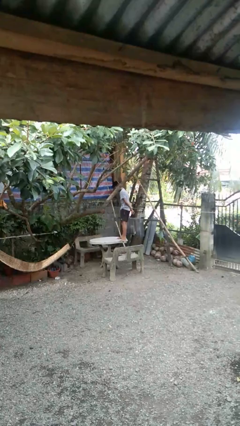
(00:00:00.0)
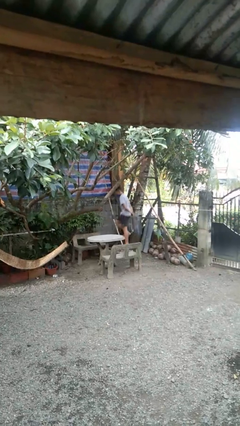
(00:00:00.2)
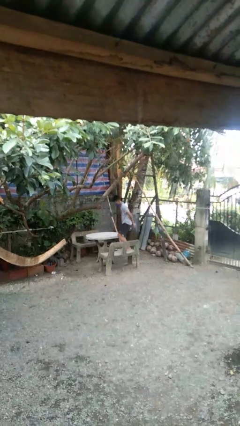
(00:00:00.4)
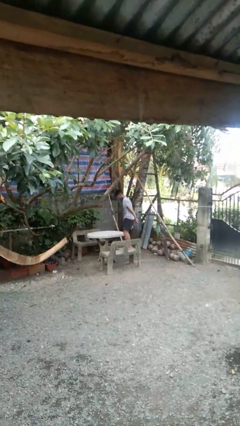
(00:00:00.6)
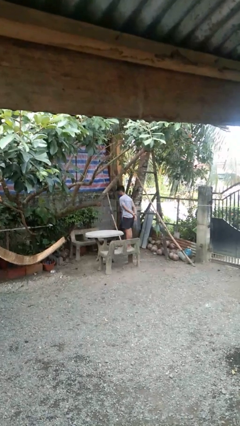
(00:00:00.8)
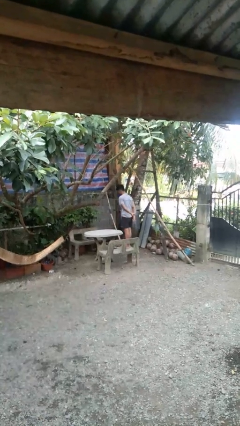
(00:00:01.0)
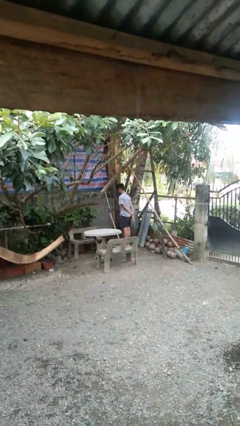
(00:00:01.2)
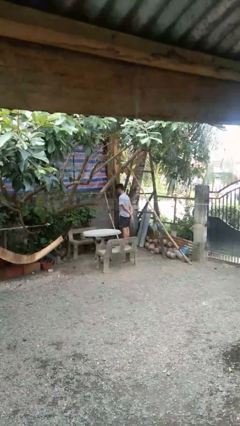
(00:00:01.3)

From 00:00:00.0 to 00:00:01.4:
person climbs off table

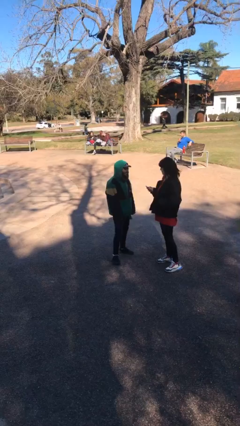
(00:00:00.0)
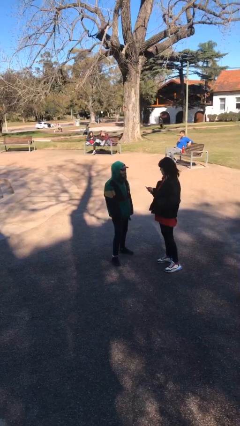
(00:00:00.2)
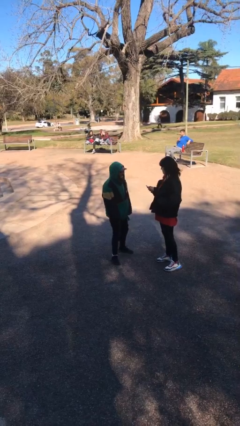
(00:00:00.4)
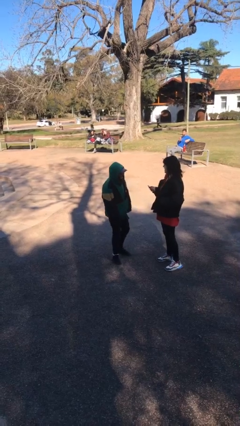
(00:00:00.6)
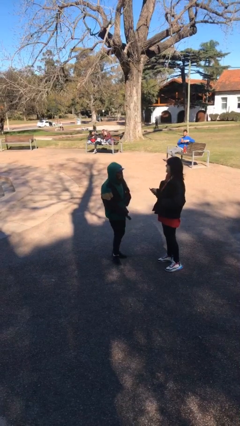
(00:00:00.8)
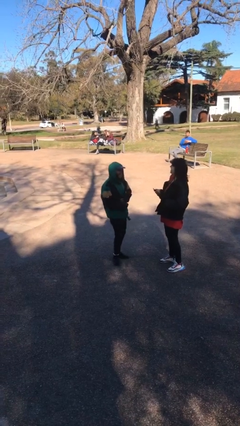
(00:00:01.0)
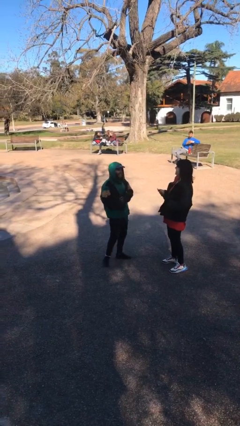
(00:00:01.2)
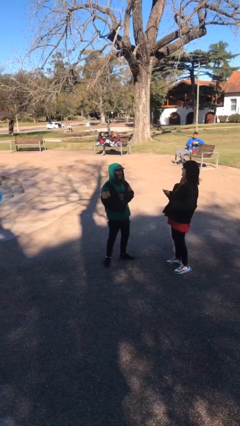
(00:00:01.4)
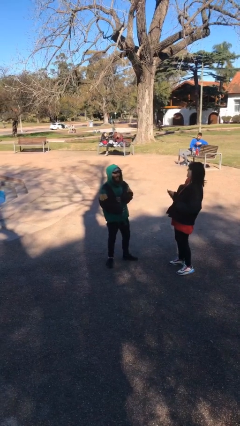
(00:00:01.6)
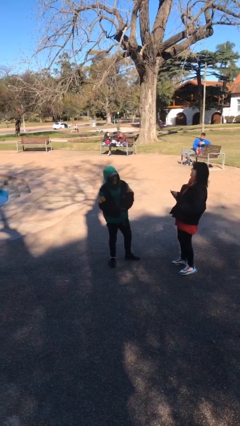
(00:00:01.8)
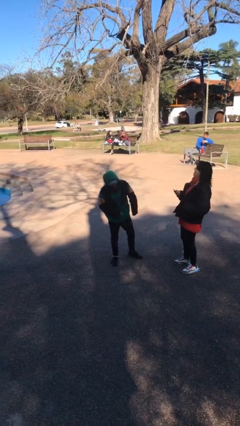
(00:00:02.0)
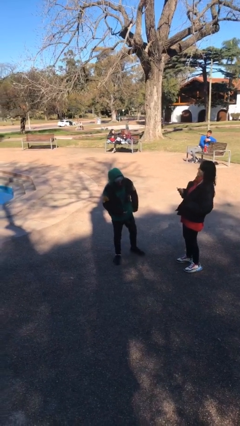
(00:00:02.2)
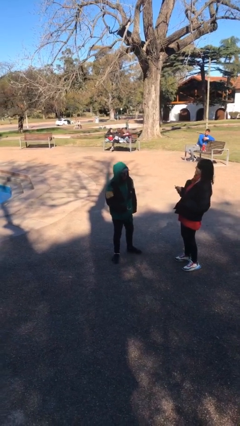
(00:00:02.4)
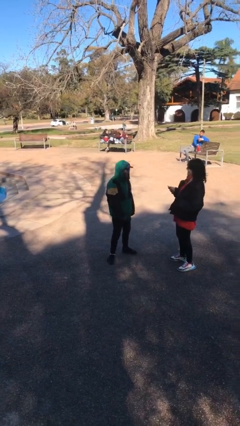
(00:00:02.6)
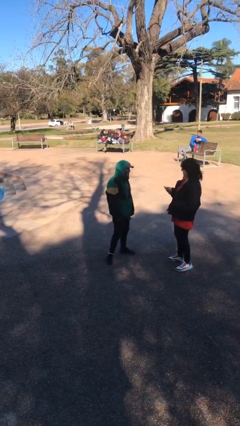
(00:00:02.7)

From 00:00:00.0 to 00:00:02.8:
person laughs with person

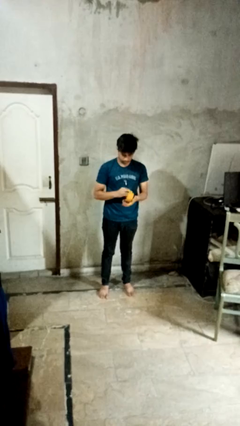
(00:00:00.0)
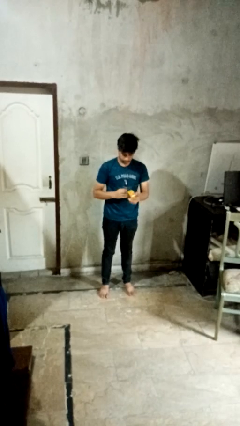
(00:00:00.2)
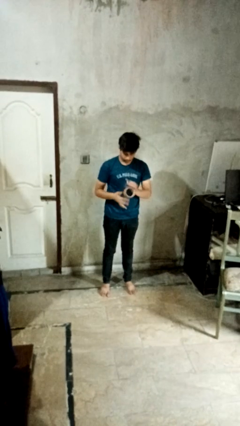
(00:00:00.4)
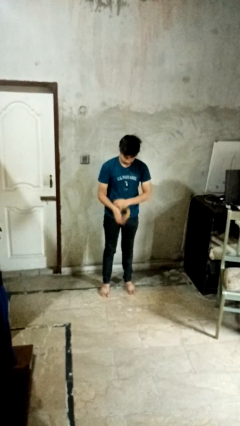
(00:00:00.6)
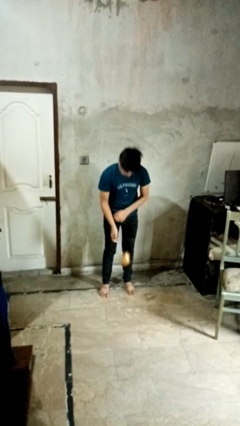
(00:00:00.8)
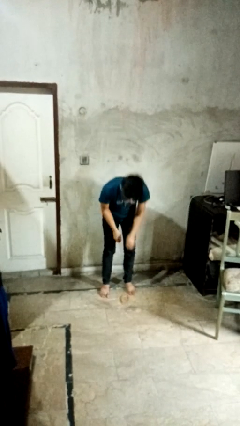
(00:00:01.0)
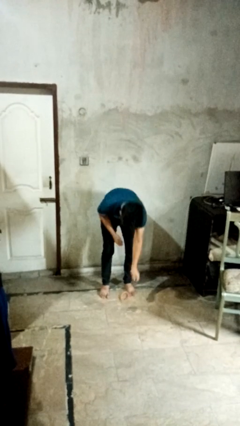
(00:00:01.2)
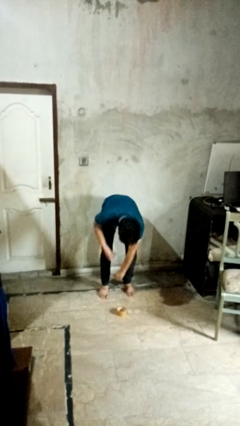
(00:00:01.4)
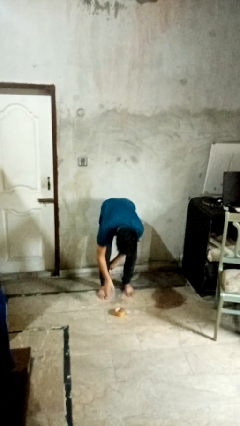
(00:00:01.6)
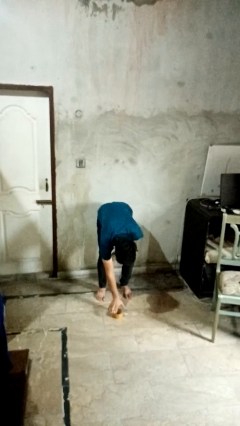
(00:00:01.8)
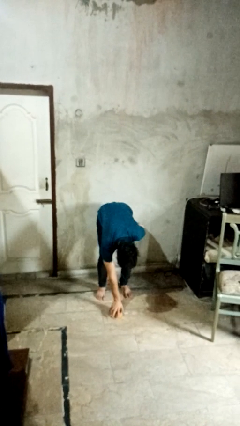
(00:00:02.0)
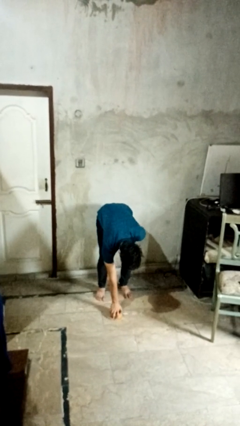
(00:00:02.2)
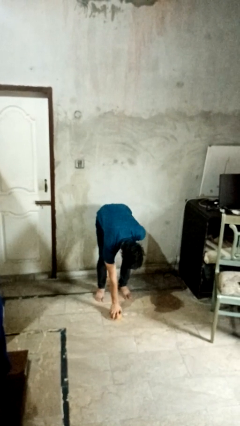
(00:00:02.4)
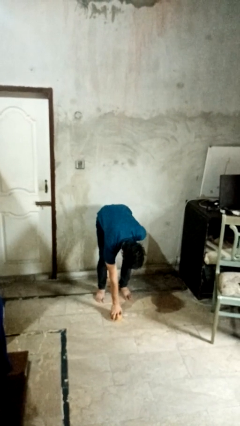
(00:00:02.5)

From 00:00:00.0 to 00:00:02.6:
person drops object

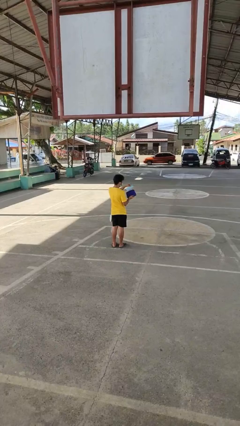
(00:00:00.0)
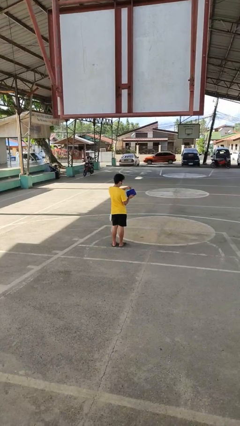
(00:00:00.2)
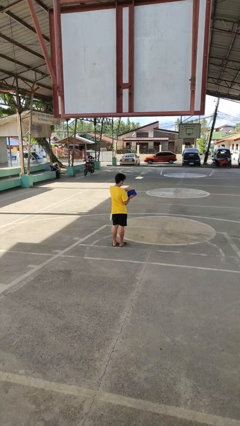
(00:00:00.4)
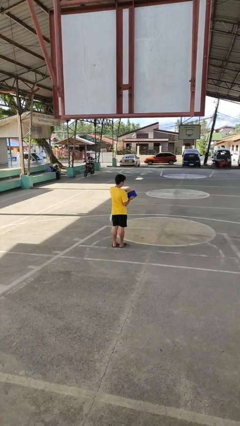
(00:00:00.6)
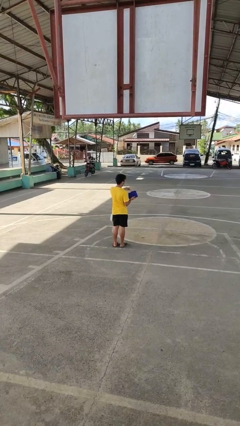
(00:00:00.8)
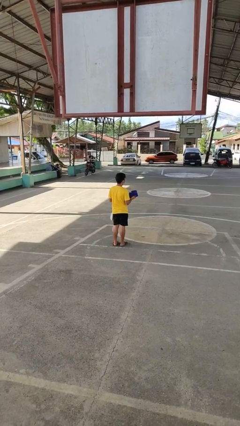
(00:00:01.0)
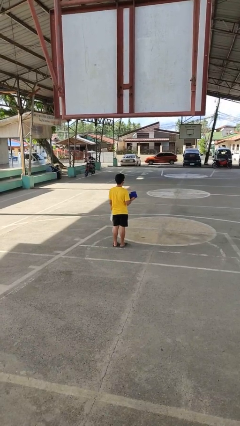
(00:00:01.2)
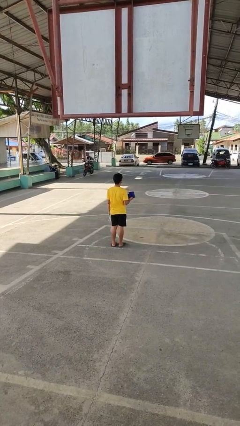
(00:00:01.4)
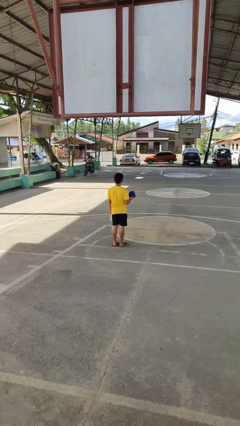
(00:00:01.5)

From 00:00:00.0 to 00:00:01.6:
person puts object into purse

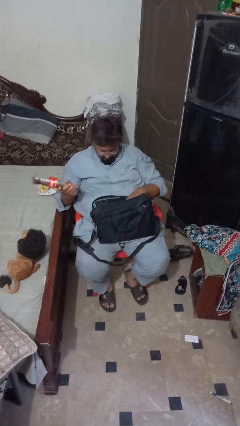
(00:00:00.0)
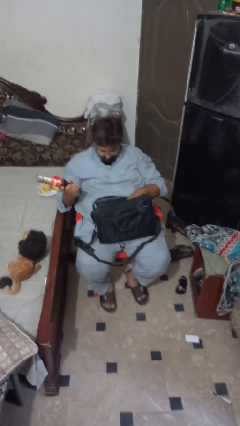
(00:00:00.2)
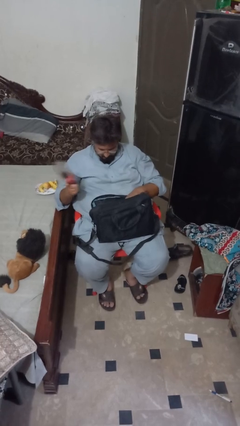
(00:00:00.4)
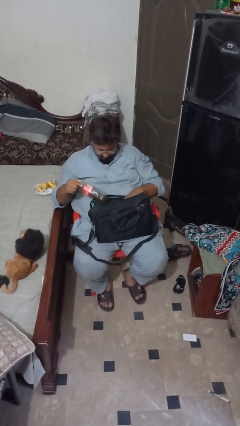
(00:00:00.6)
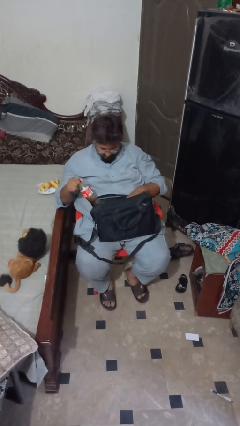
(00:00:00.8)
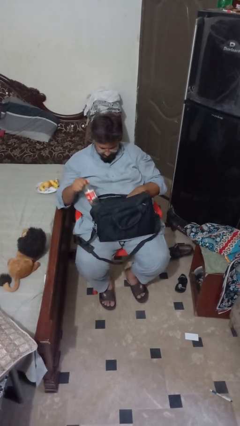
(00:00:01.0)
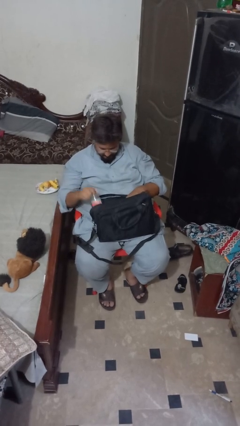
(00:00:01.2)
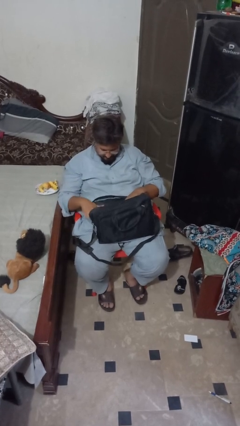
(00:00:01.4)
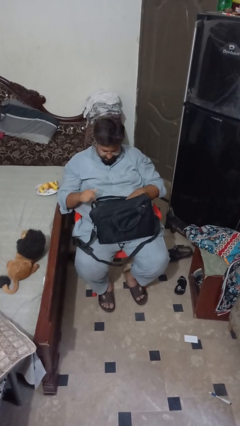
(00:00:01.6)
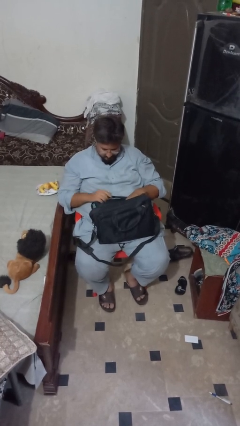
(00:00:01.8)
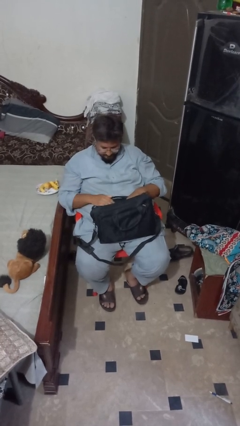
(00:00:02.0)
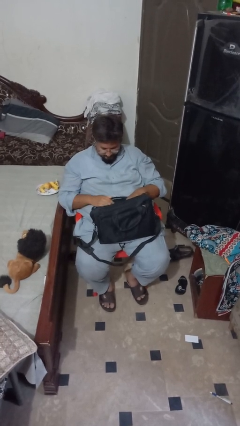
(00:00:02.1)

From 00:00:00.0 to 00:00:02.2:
person puts object into bag

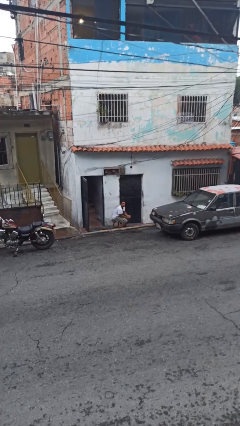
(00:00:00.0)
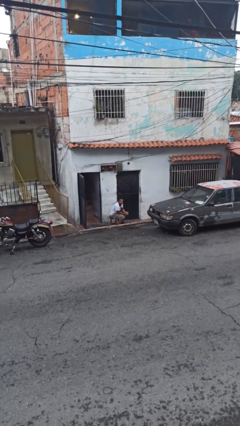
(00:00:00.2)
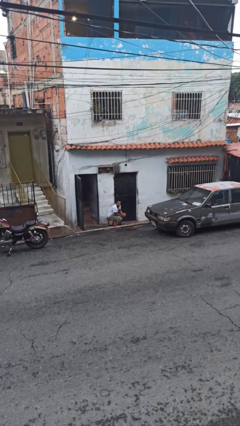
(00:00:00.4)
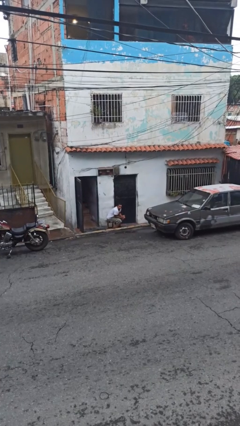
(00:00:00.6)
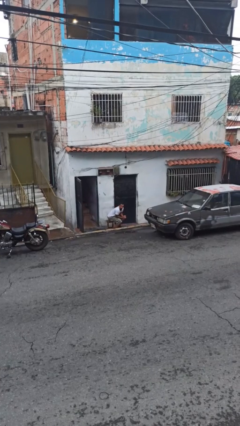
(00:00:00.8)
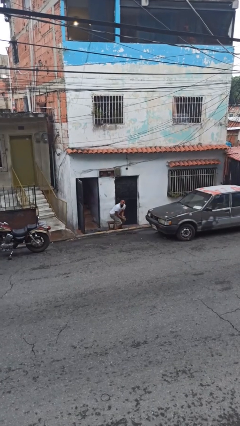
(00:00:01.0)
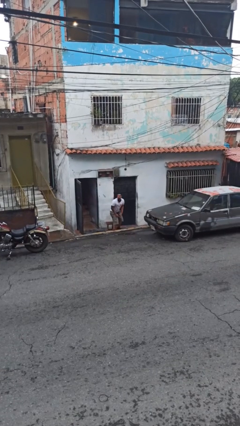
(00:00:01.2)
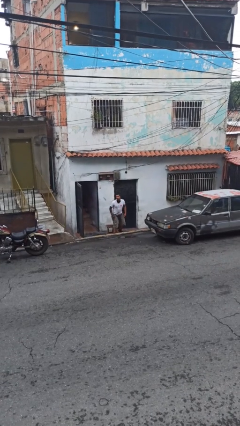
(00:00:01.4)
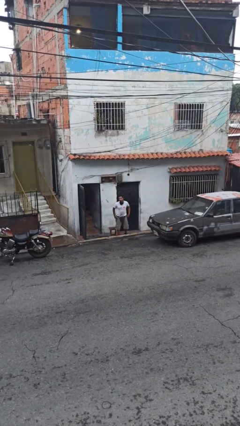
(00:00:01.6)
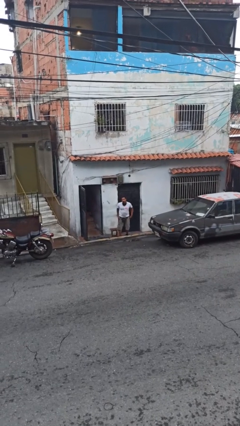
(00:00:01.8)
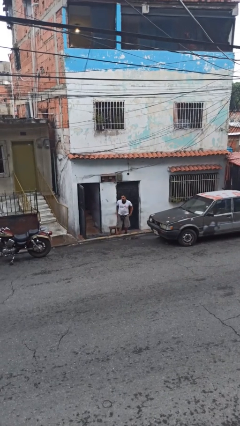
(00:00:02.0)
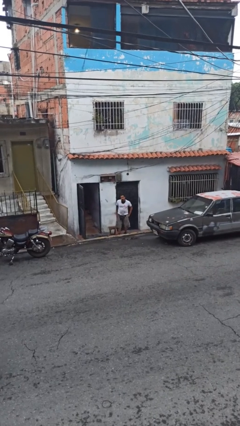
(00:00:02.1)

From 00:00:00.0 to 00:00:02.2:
person stands up

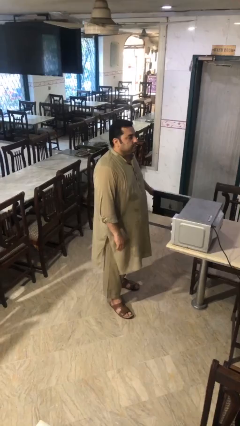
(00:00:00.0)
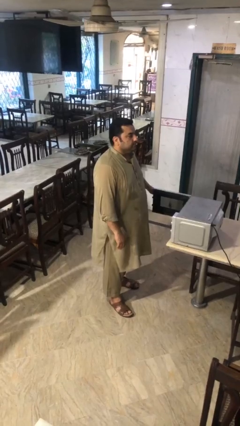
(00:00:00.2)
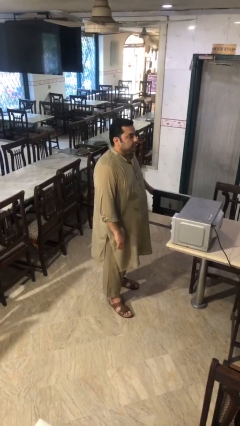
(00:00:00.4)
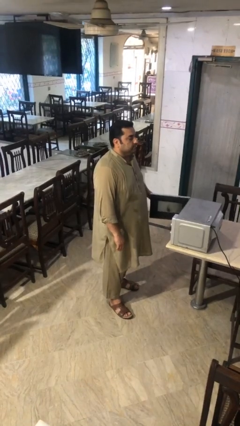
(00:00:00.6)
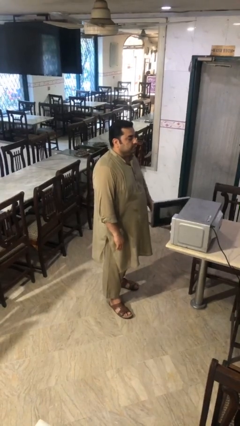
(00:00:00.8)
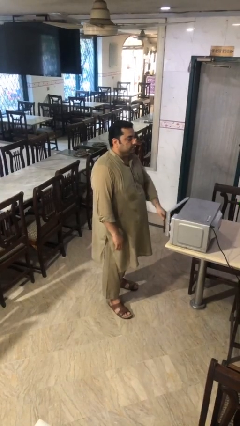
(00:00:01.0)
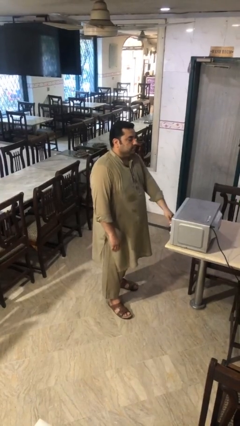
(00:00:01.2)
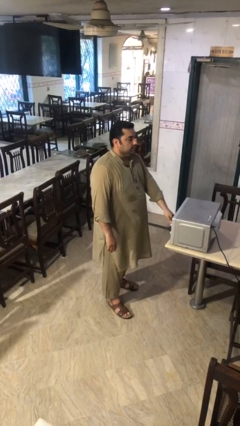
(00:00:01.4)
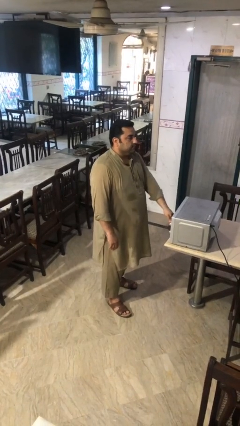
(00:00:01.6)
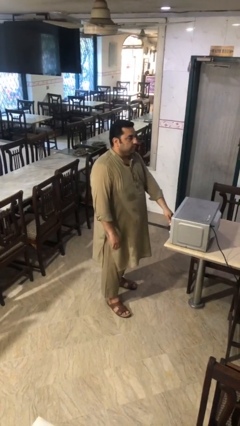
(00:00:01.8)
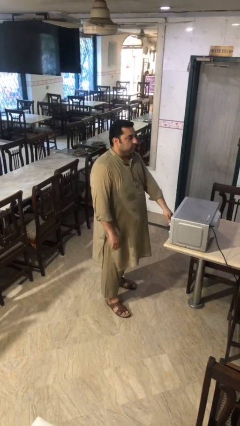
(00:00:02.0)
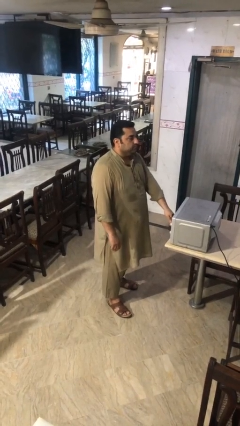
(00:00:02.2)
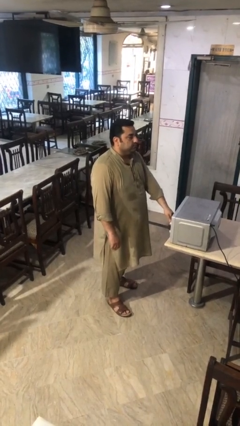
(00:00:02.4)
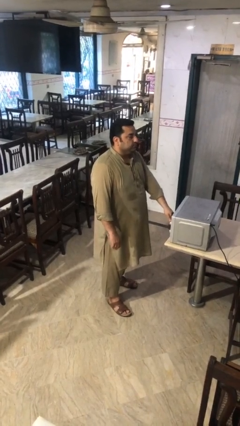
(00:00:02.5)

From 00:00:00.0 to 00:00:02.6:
person closes microwave

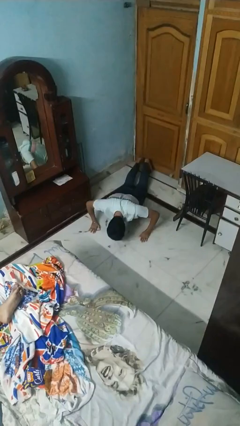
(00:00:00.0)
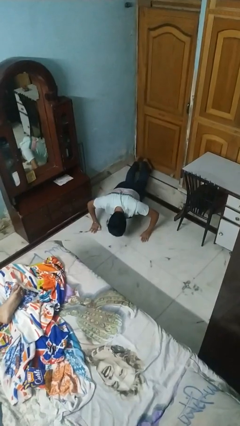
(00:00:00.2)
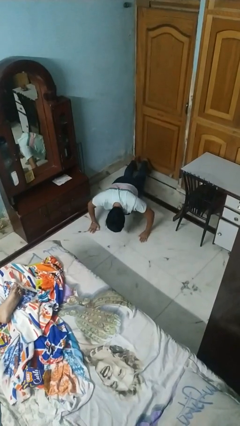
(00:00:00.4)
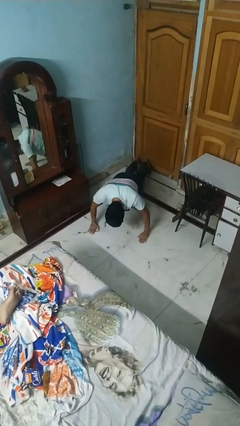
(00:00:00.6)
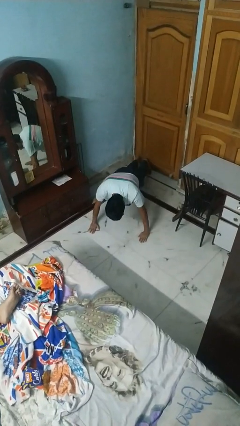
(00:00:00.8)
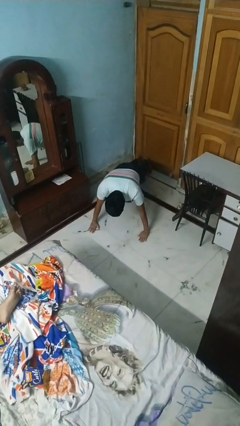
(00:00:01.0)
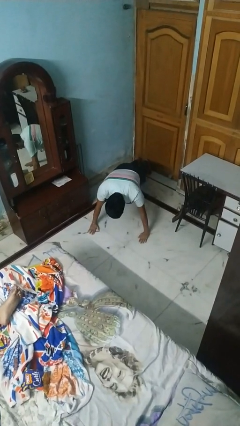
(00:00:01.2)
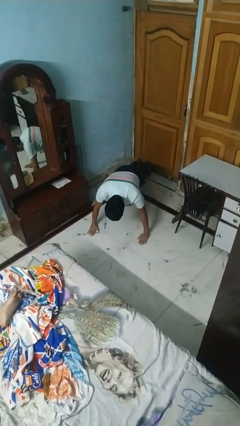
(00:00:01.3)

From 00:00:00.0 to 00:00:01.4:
person exercises with pushup
